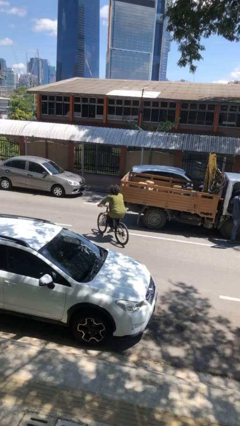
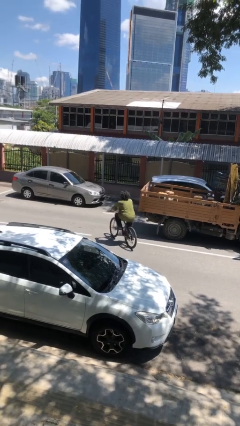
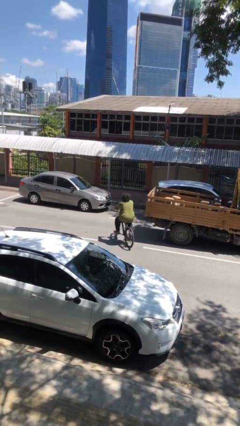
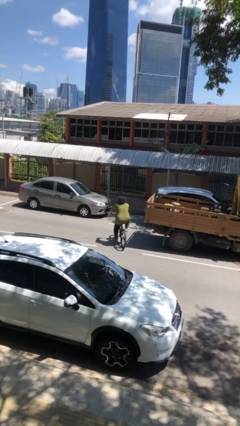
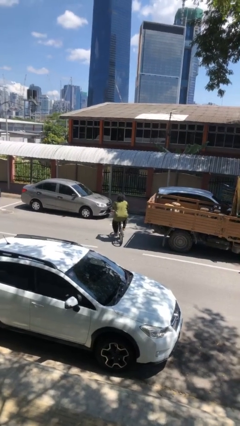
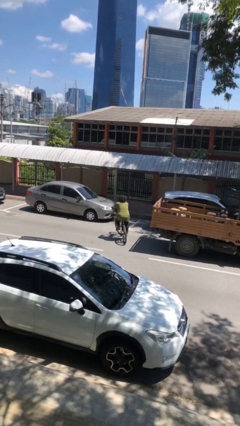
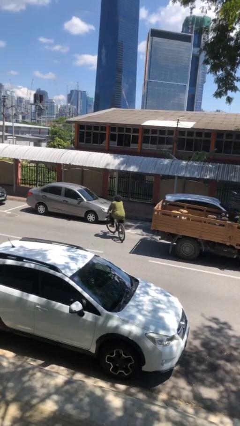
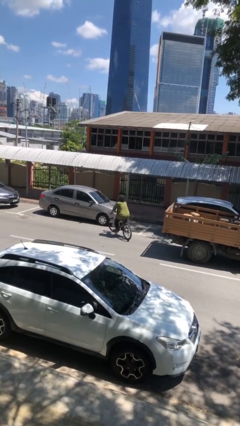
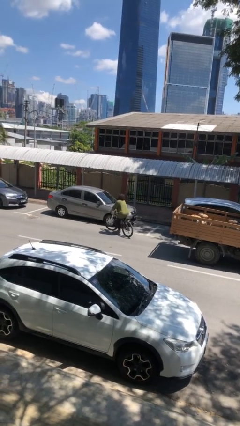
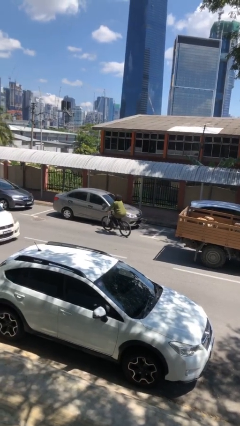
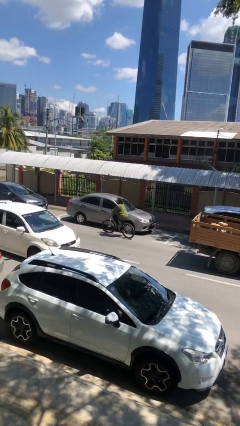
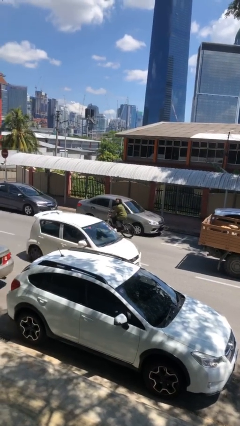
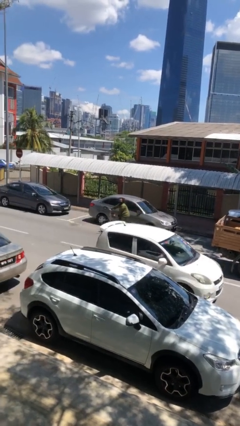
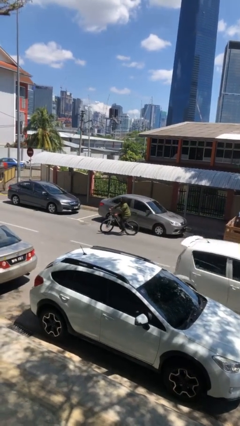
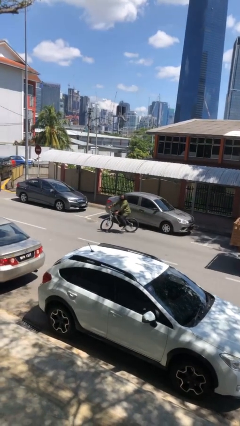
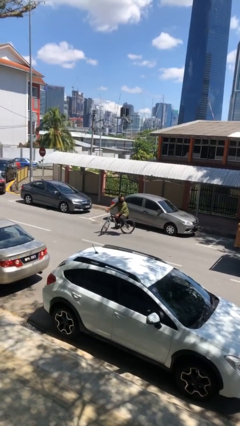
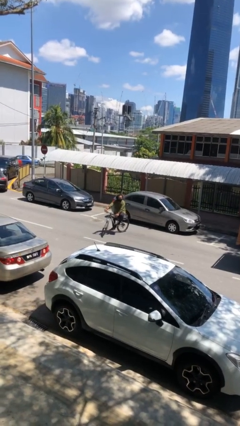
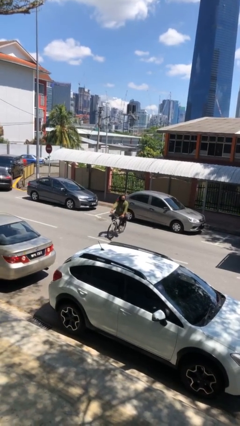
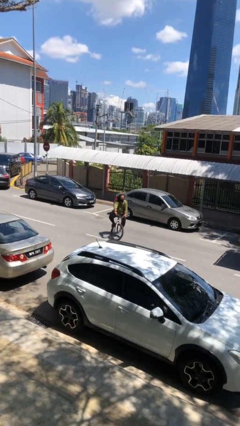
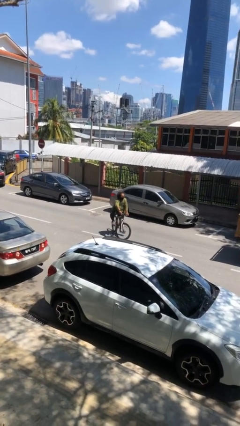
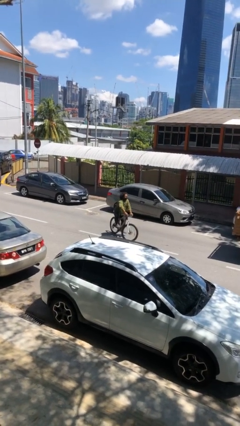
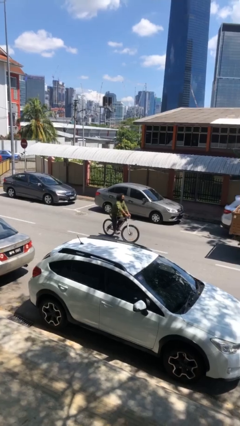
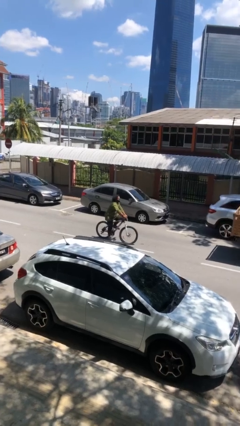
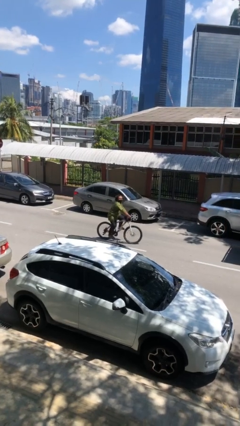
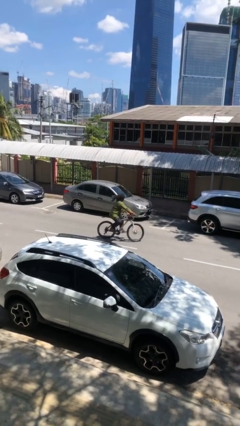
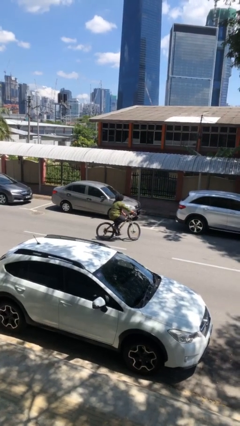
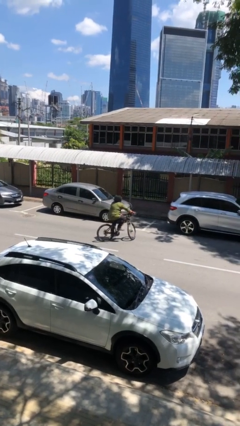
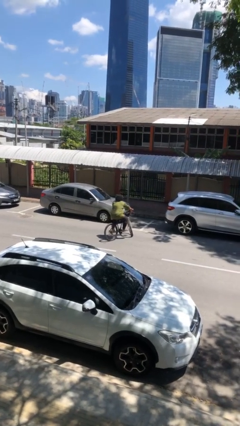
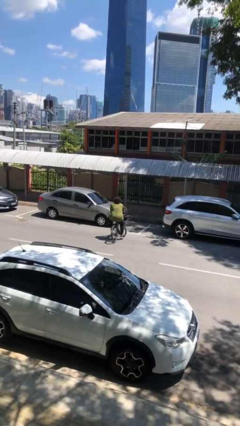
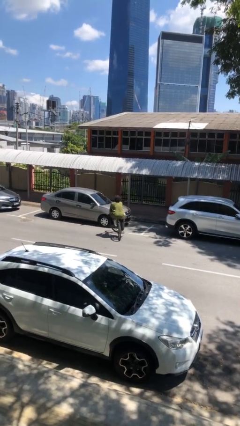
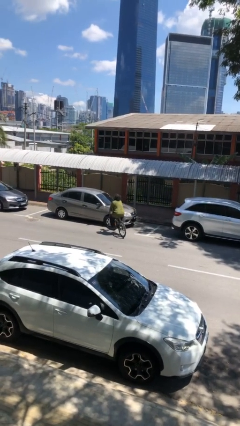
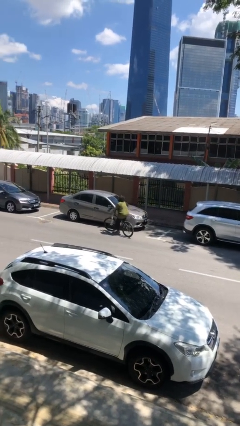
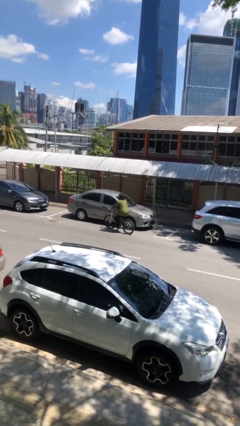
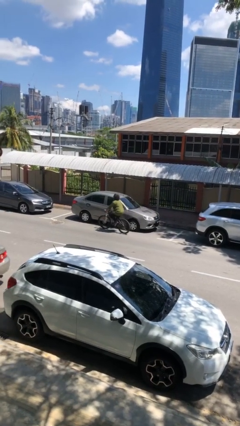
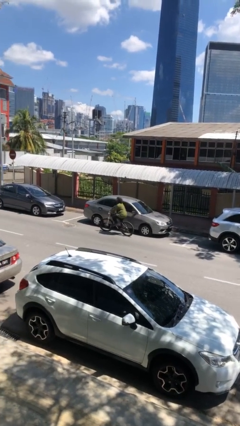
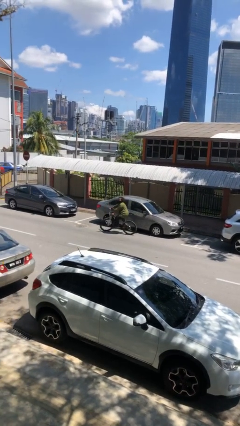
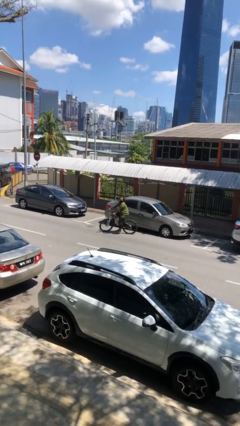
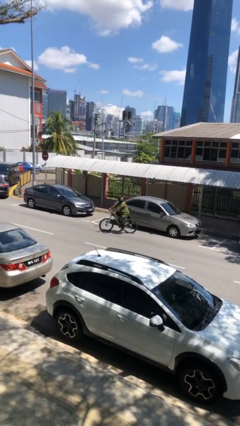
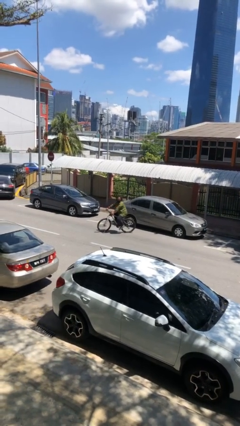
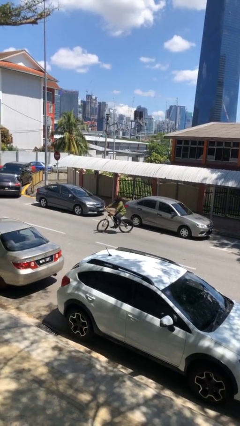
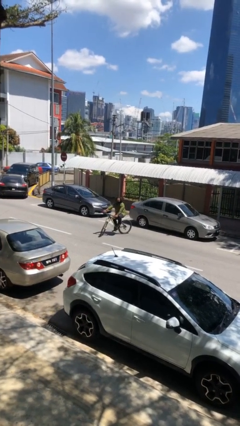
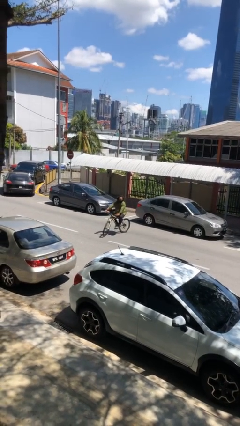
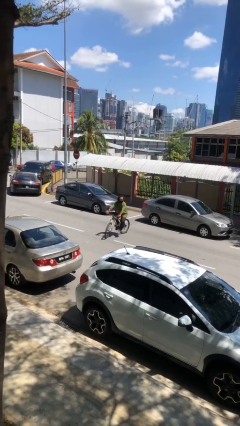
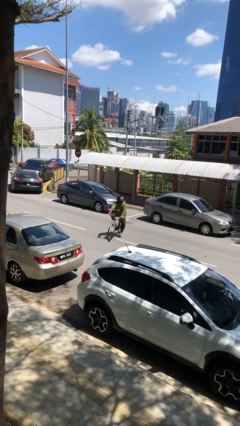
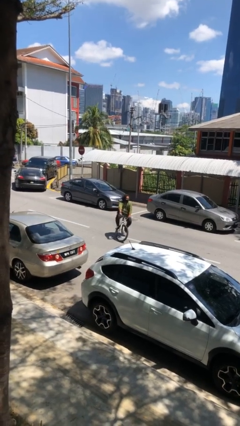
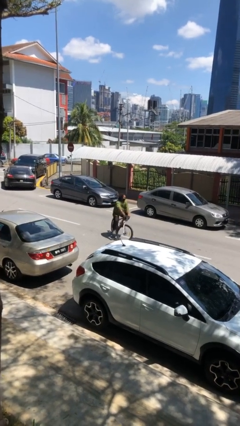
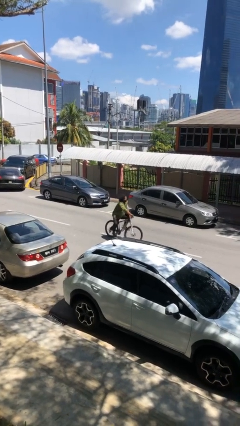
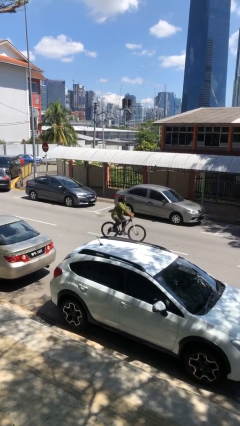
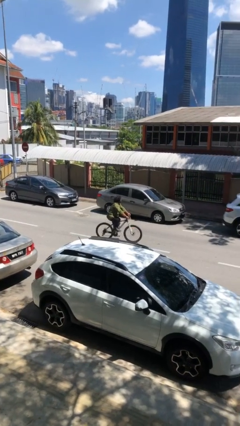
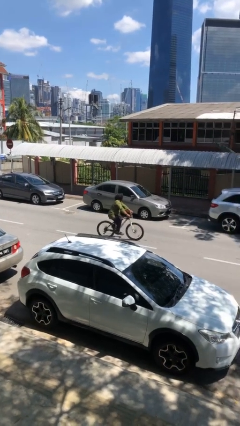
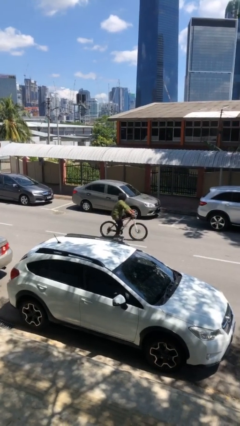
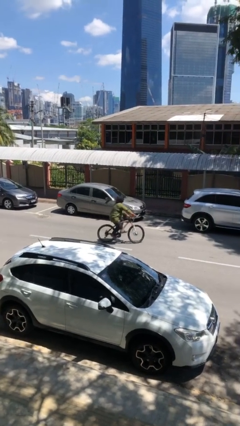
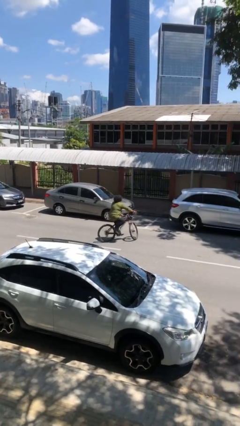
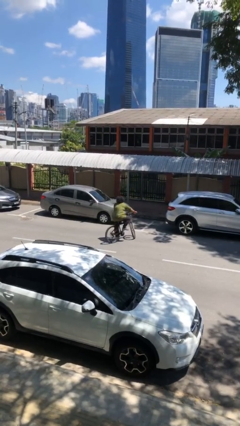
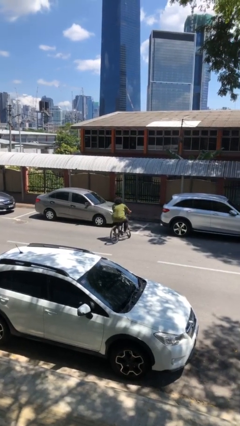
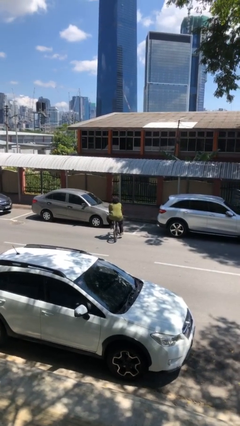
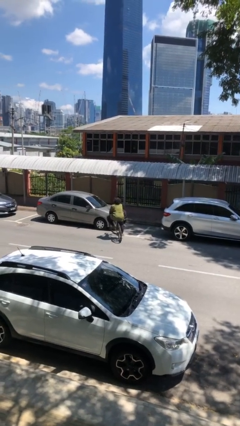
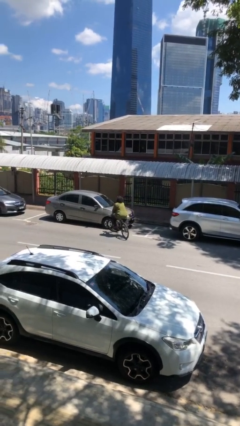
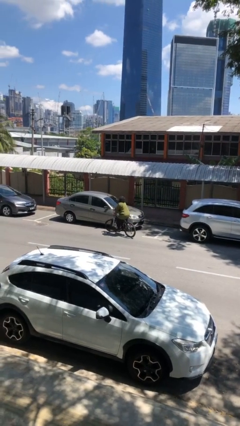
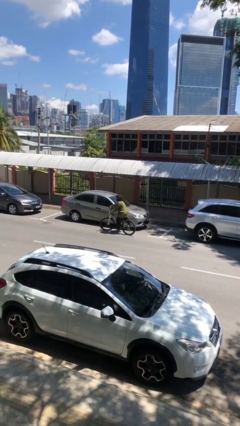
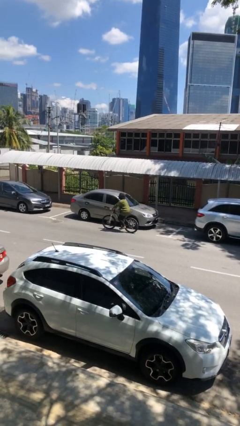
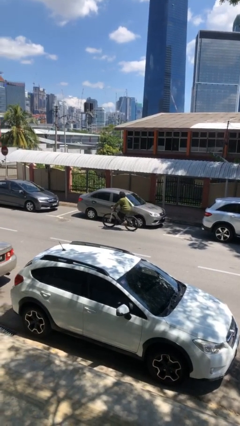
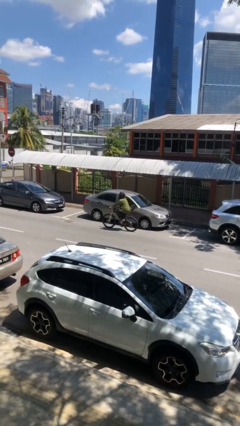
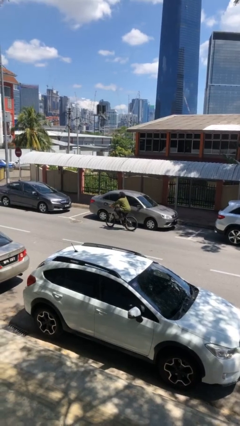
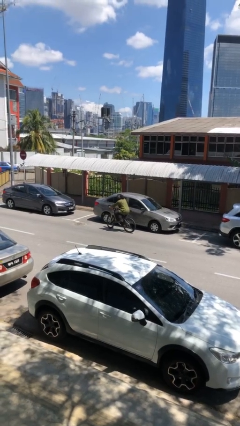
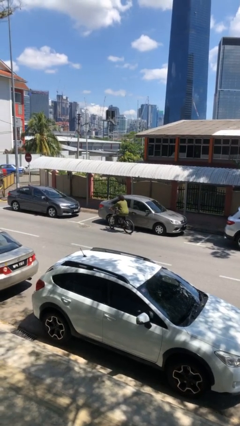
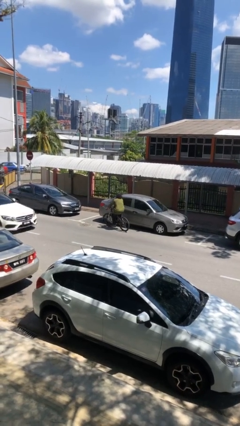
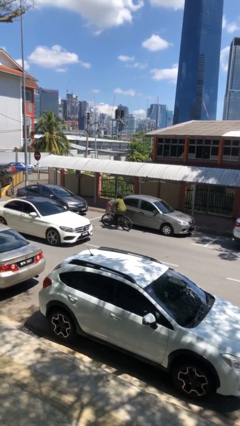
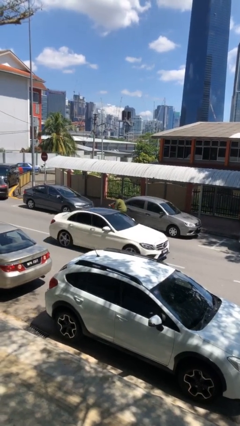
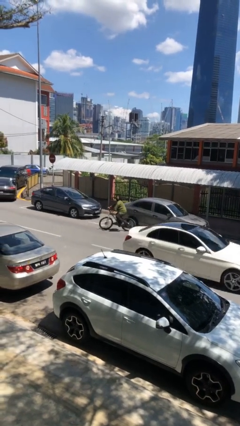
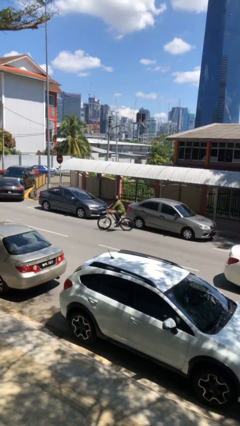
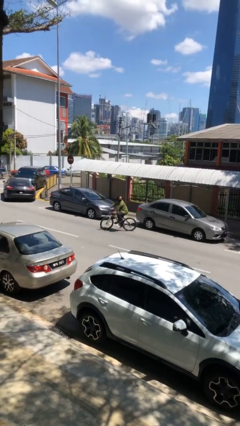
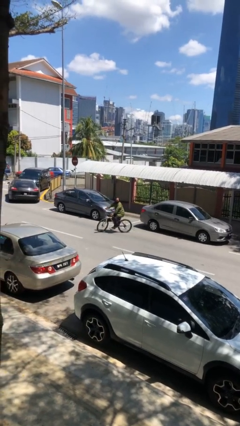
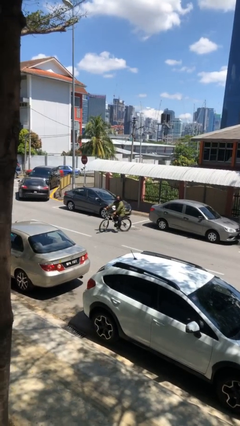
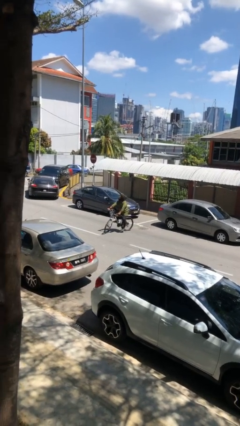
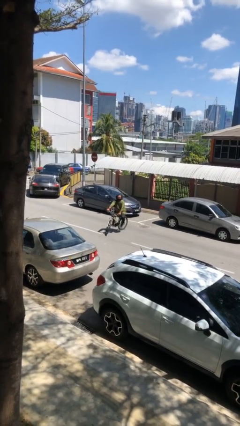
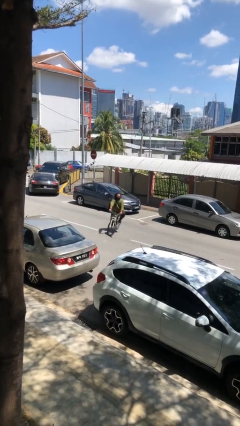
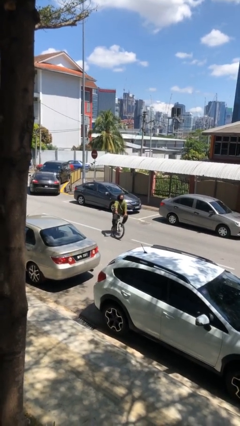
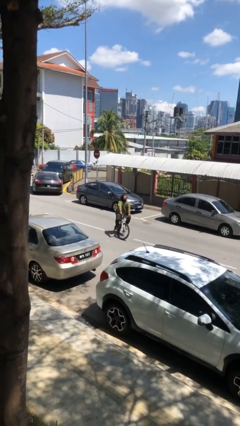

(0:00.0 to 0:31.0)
person rides bicycle

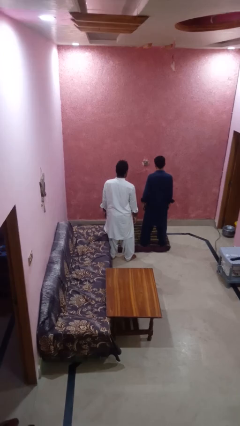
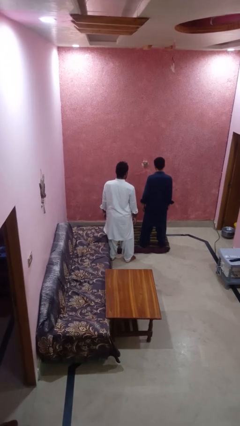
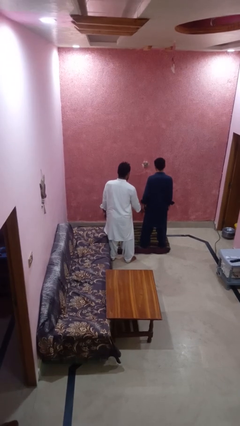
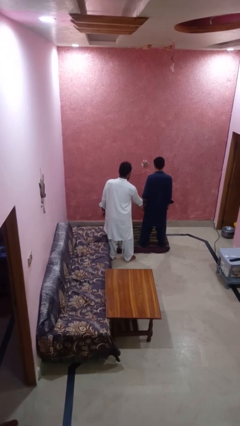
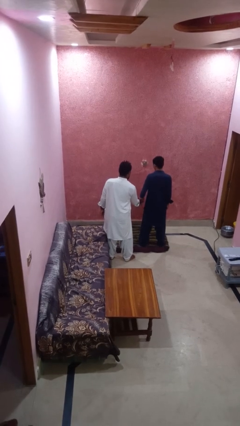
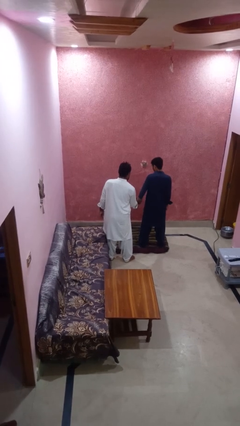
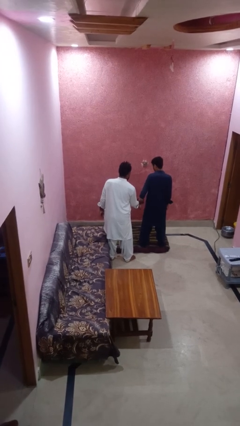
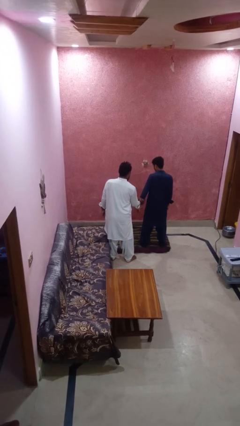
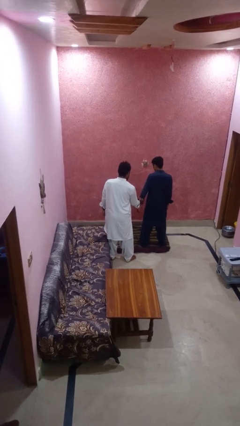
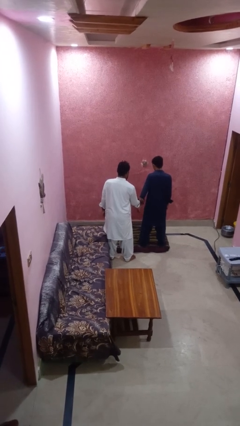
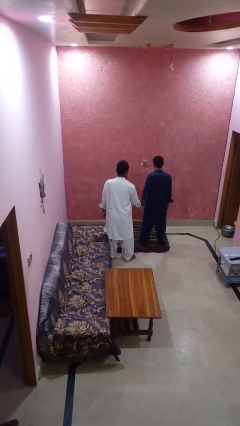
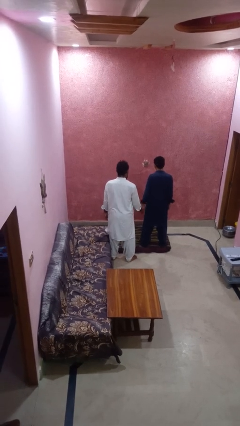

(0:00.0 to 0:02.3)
person grabs person by bicep

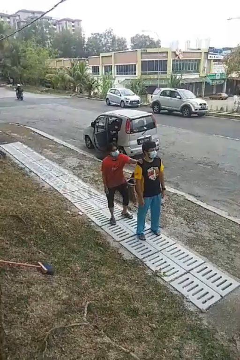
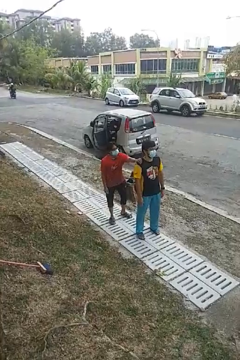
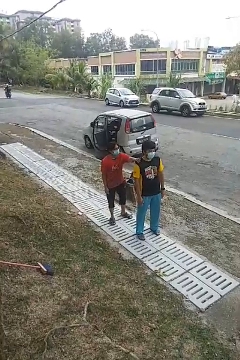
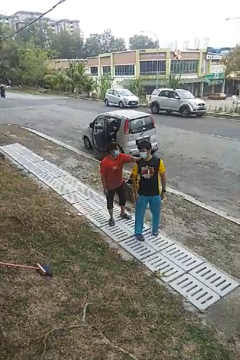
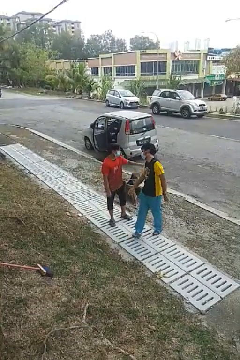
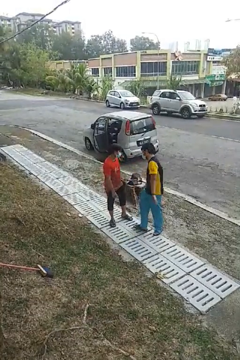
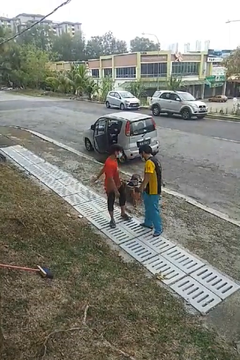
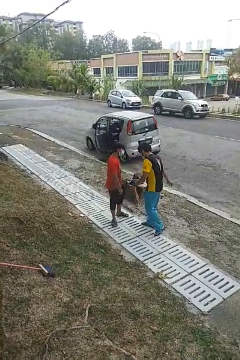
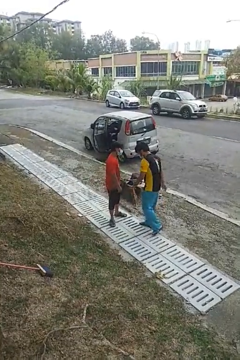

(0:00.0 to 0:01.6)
person spins person around
